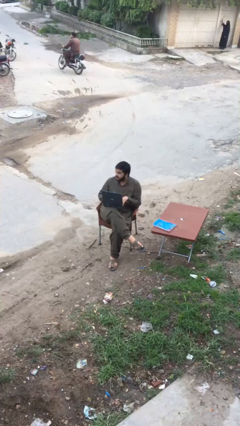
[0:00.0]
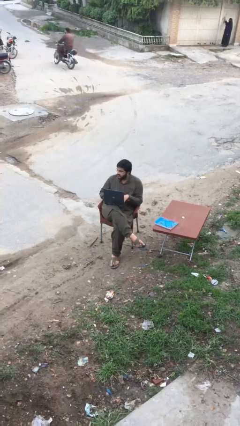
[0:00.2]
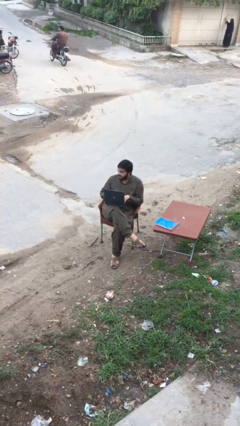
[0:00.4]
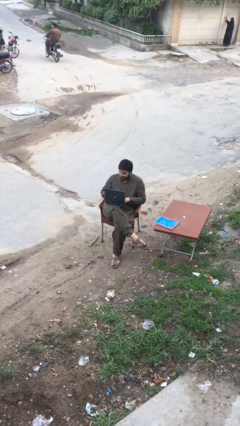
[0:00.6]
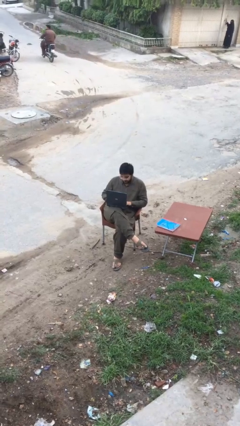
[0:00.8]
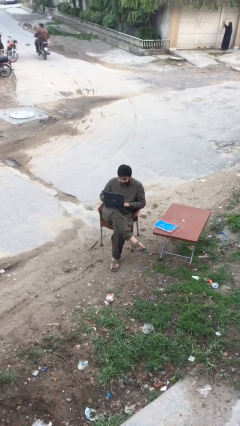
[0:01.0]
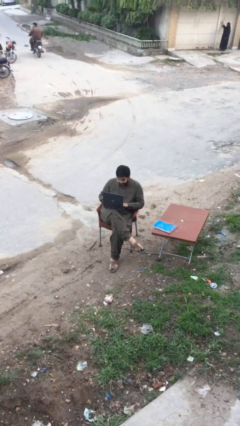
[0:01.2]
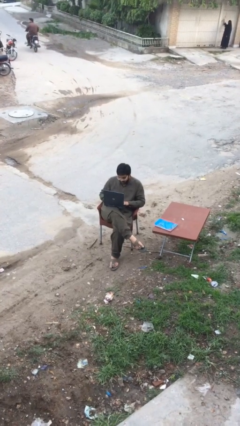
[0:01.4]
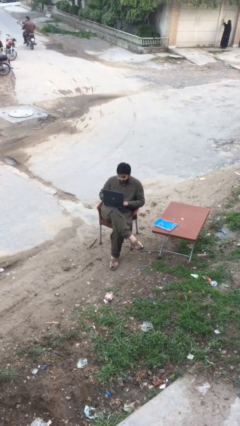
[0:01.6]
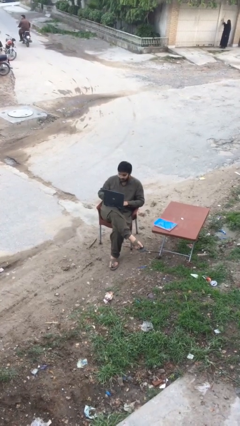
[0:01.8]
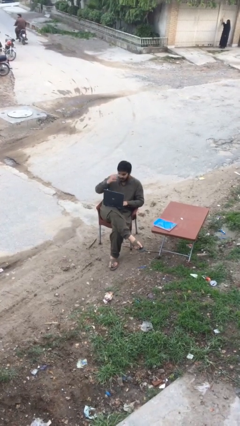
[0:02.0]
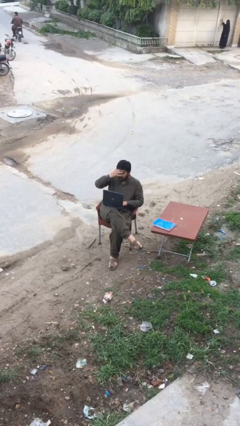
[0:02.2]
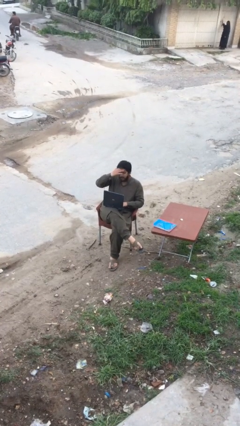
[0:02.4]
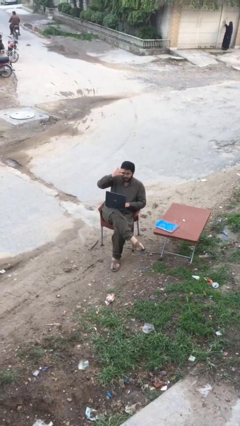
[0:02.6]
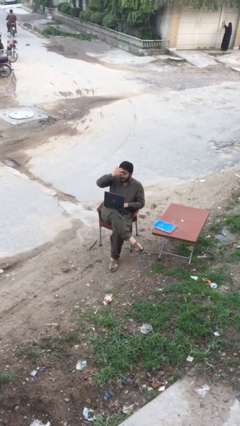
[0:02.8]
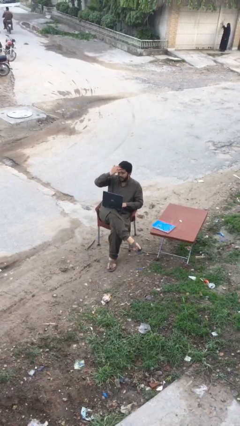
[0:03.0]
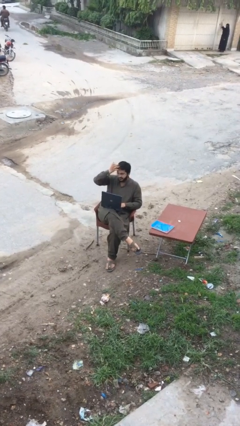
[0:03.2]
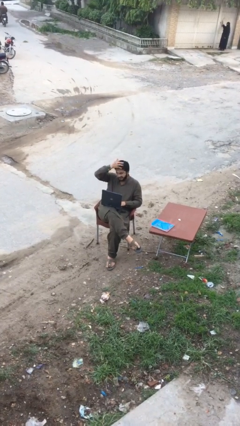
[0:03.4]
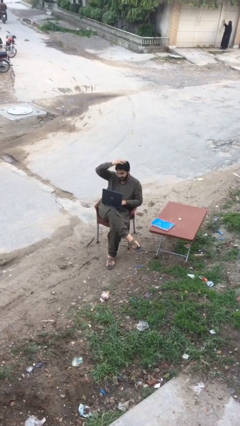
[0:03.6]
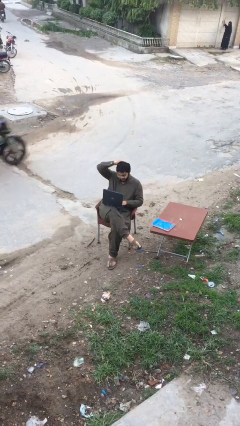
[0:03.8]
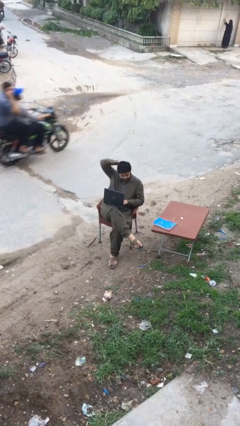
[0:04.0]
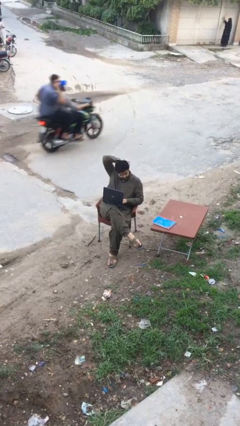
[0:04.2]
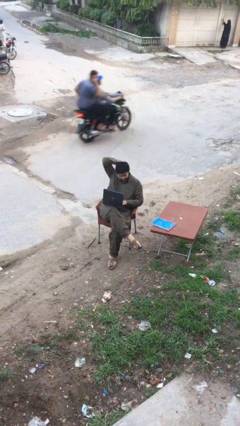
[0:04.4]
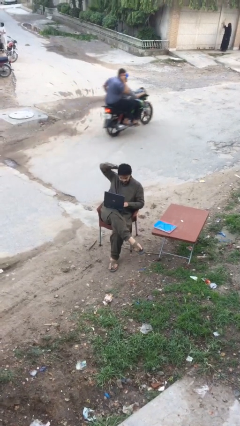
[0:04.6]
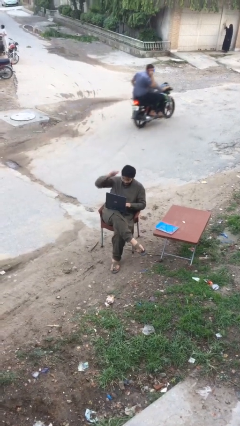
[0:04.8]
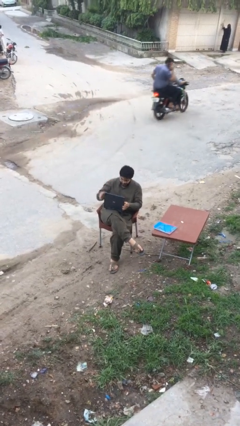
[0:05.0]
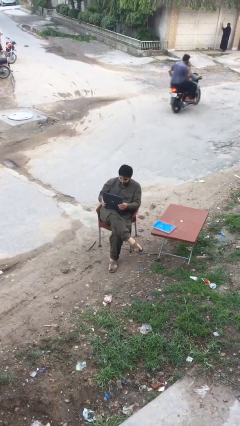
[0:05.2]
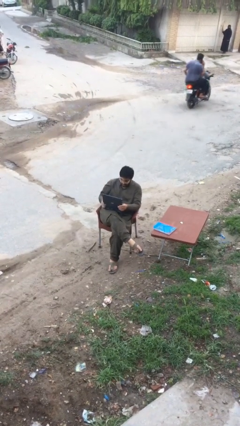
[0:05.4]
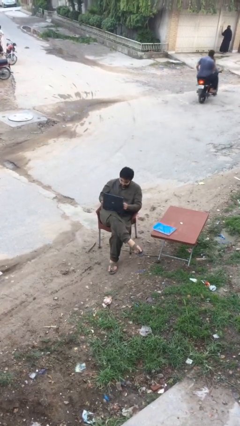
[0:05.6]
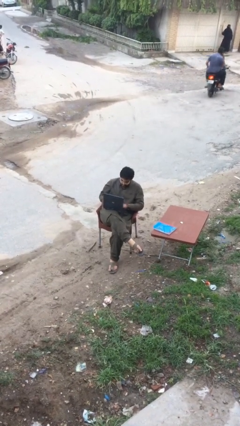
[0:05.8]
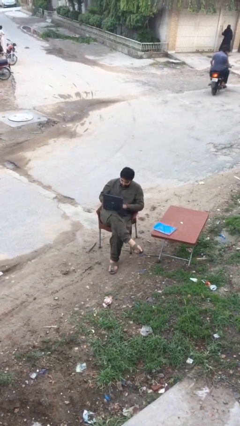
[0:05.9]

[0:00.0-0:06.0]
person interacts with laptop

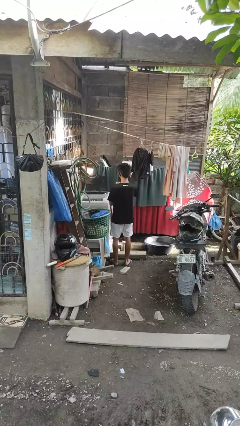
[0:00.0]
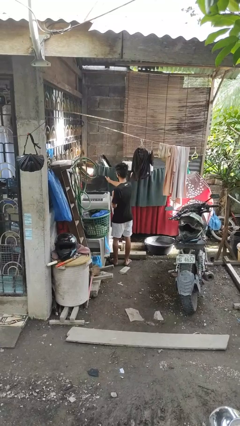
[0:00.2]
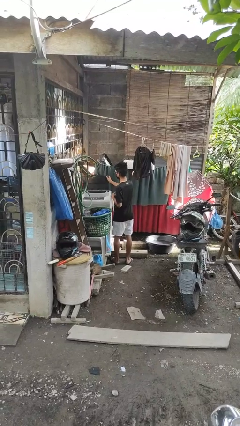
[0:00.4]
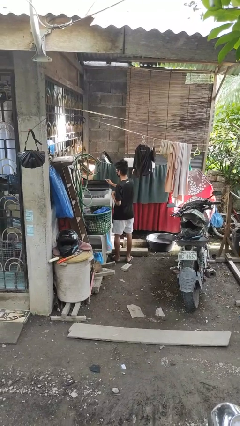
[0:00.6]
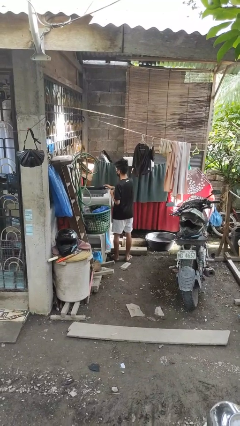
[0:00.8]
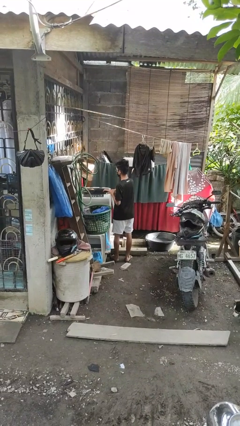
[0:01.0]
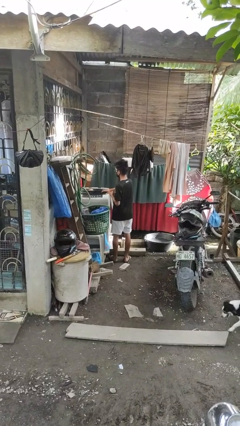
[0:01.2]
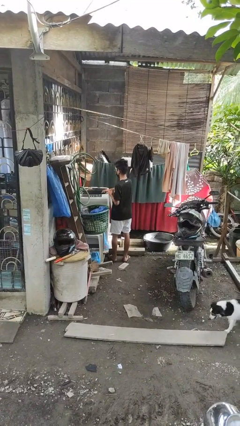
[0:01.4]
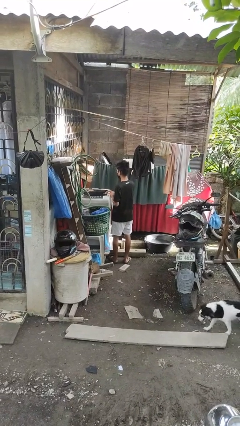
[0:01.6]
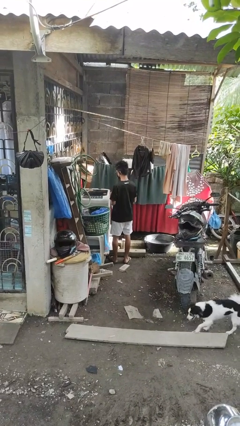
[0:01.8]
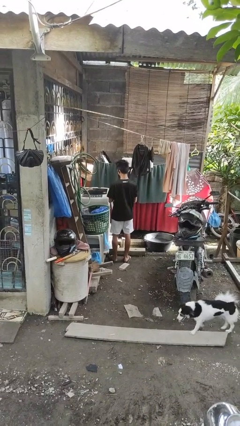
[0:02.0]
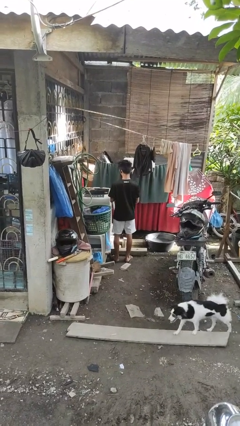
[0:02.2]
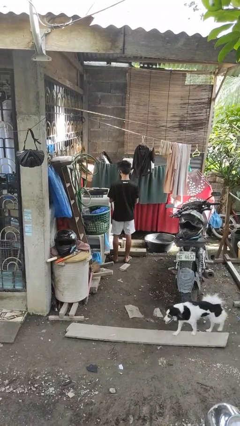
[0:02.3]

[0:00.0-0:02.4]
person closes clothes washer

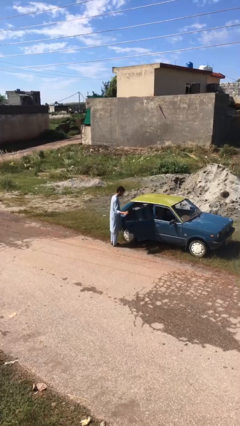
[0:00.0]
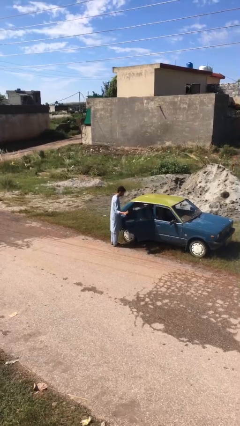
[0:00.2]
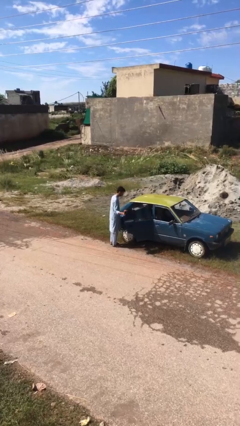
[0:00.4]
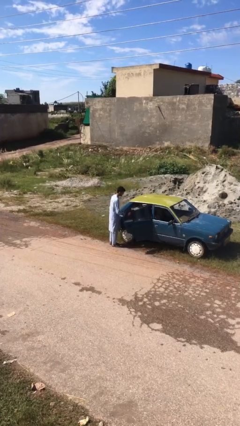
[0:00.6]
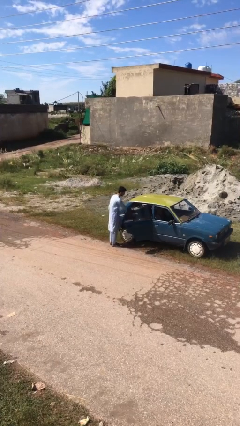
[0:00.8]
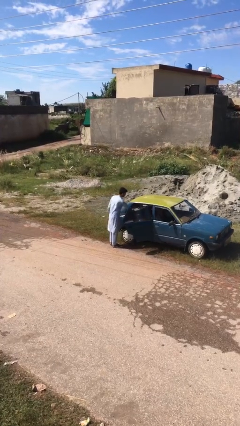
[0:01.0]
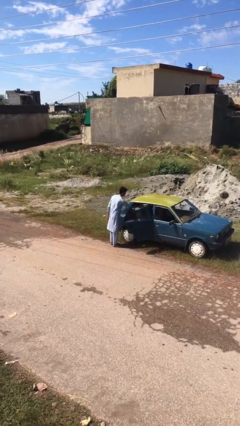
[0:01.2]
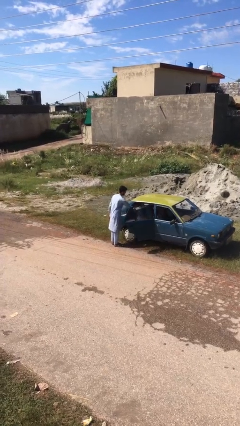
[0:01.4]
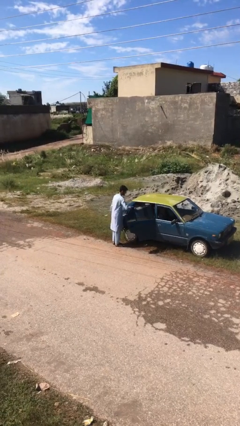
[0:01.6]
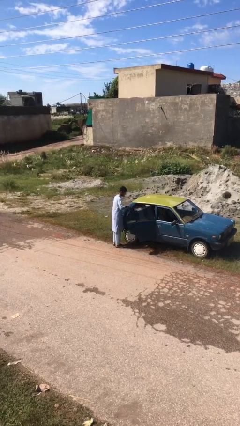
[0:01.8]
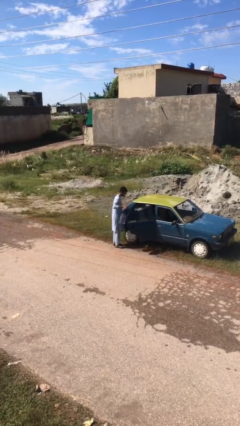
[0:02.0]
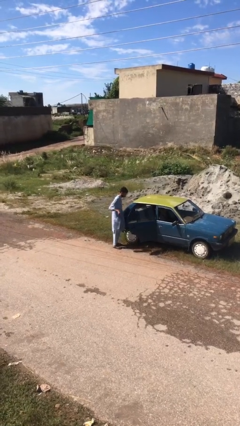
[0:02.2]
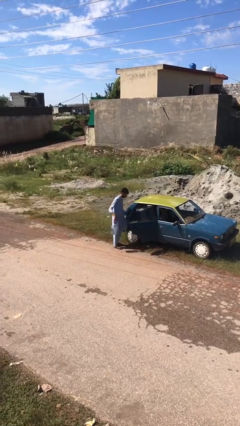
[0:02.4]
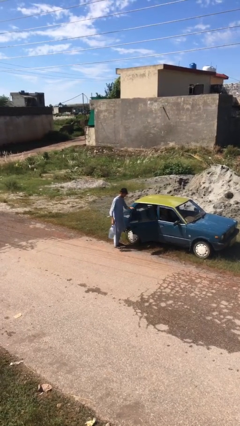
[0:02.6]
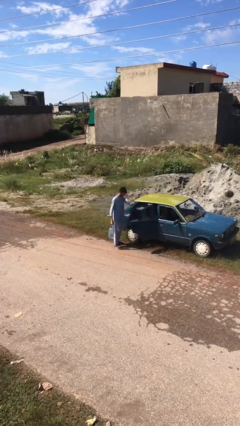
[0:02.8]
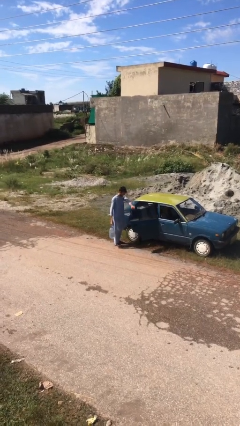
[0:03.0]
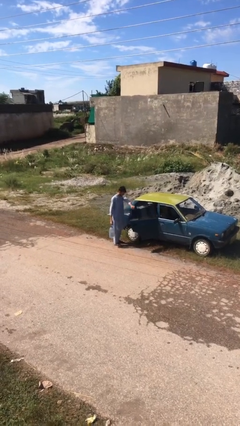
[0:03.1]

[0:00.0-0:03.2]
person unloads car

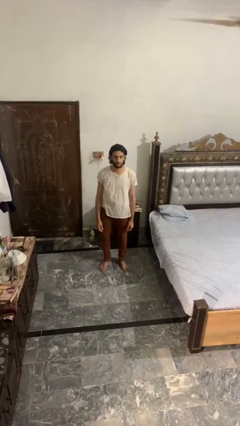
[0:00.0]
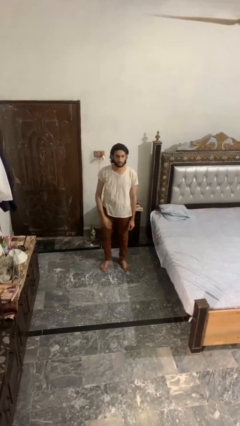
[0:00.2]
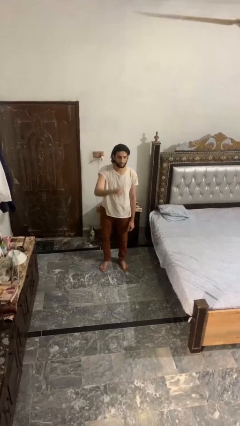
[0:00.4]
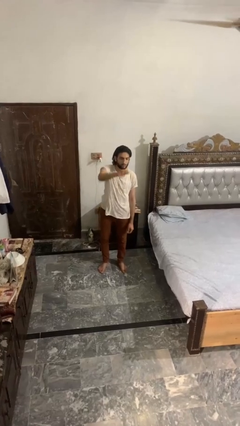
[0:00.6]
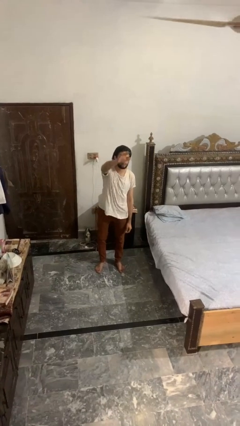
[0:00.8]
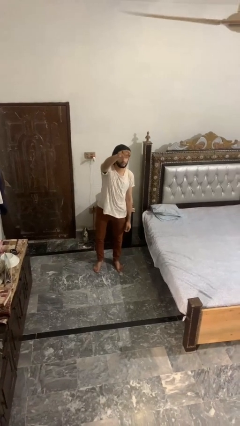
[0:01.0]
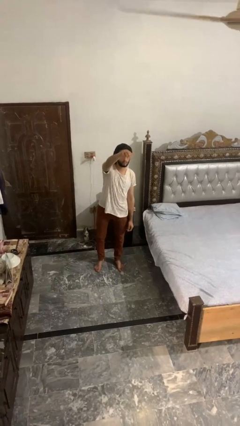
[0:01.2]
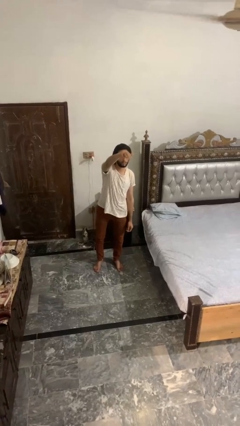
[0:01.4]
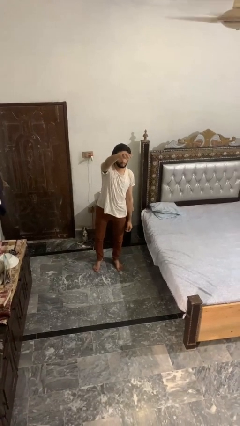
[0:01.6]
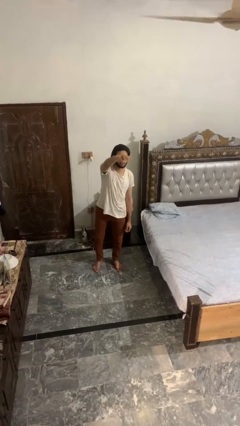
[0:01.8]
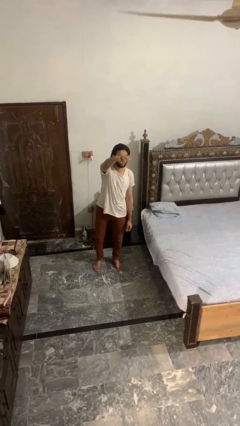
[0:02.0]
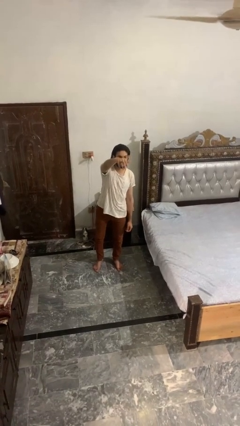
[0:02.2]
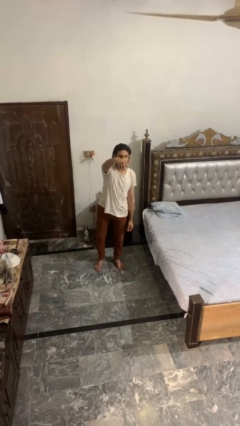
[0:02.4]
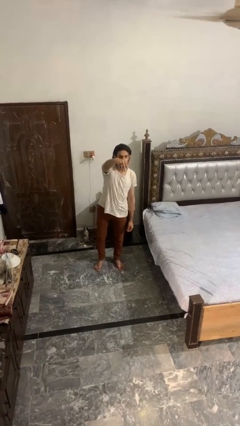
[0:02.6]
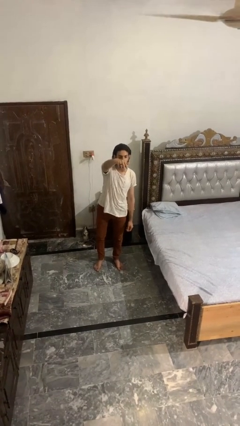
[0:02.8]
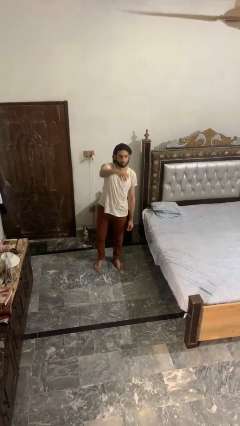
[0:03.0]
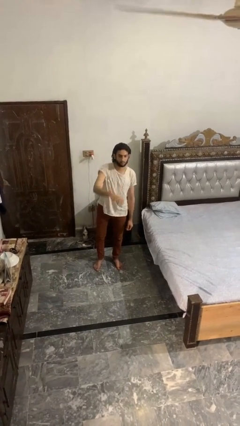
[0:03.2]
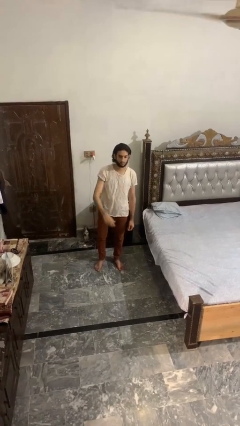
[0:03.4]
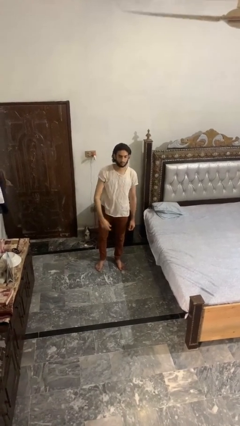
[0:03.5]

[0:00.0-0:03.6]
person gestures come here

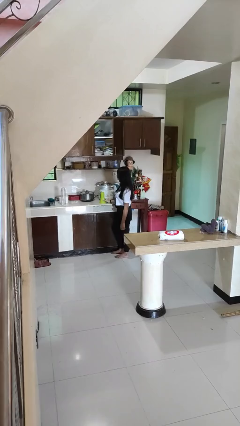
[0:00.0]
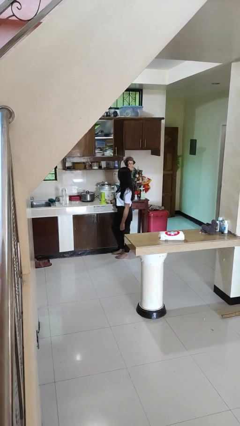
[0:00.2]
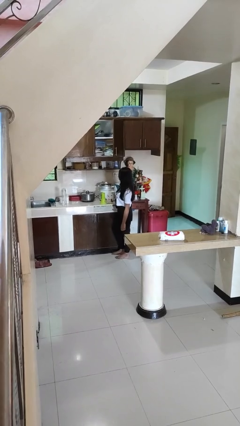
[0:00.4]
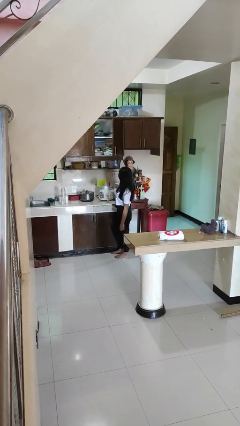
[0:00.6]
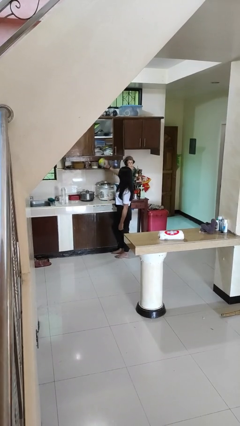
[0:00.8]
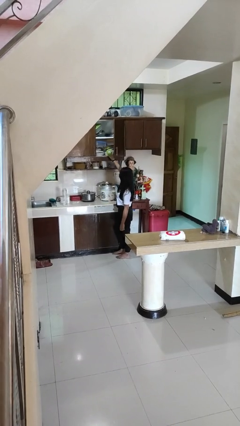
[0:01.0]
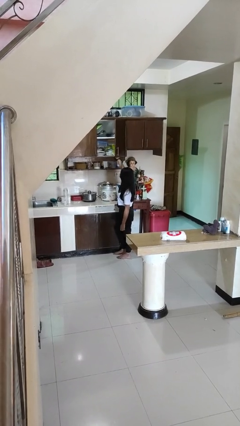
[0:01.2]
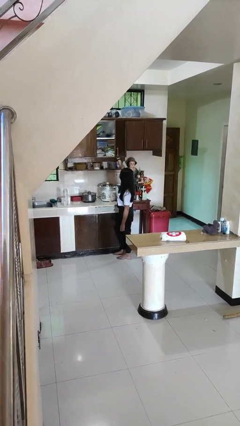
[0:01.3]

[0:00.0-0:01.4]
person puts down object into cabinet

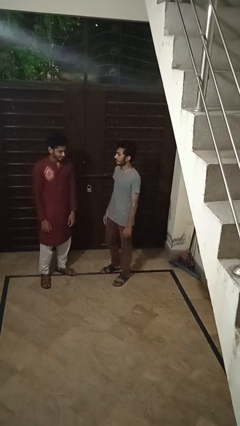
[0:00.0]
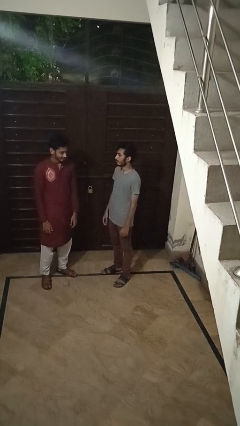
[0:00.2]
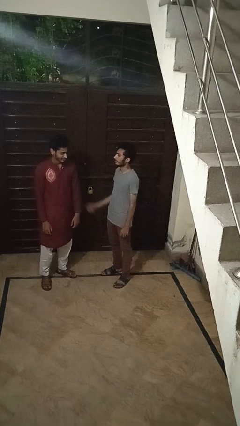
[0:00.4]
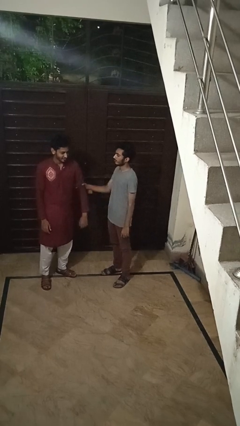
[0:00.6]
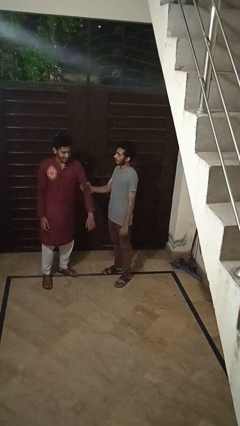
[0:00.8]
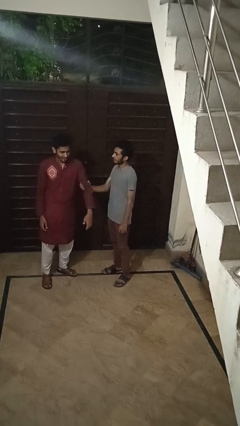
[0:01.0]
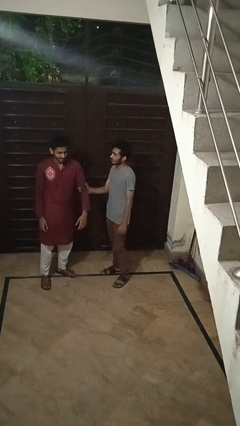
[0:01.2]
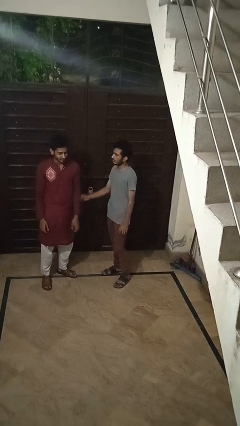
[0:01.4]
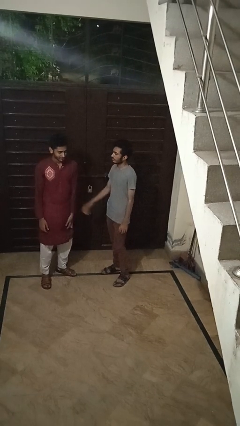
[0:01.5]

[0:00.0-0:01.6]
person grabs person by bicep
